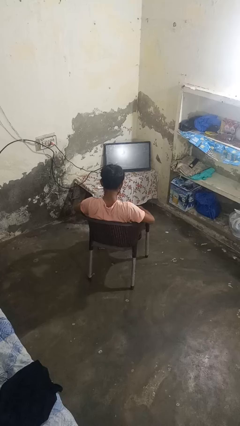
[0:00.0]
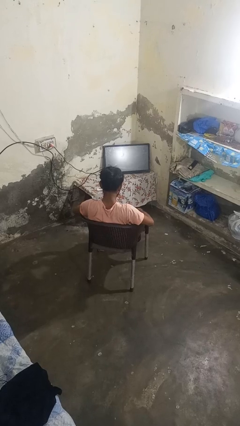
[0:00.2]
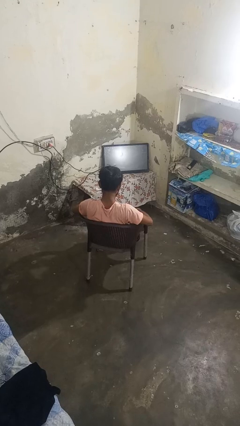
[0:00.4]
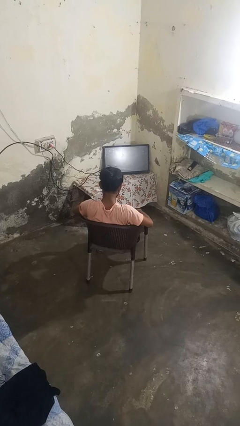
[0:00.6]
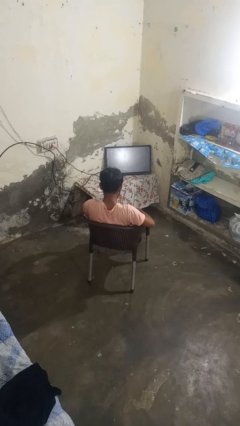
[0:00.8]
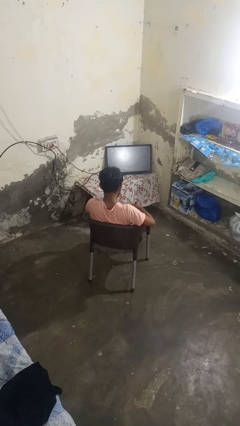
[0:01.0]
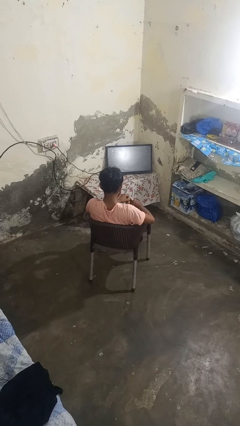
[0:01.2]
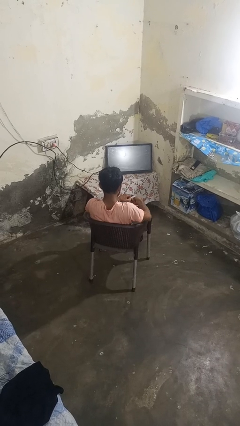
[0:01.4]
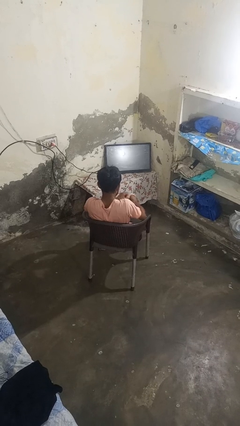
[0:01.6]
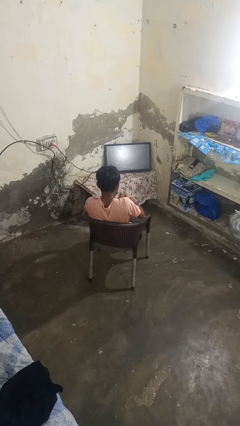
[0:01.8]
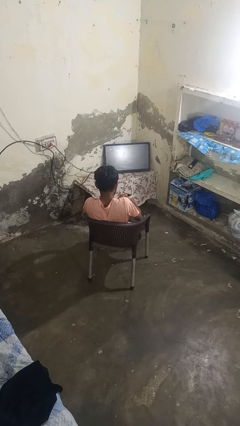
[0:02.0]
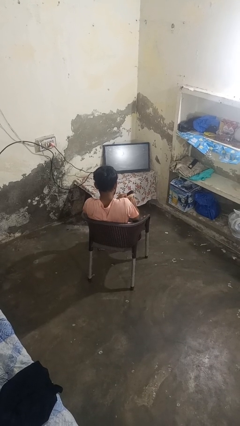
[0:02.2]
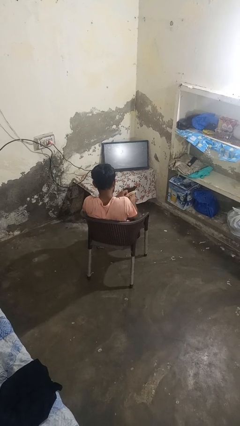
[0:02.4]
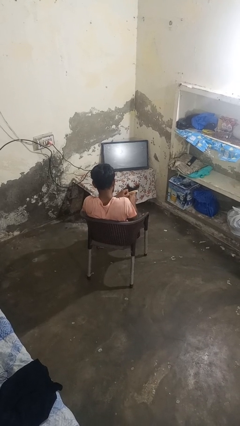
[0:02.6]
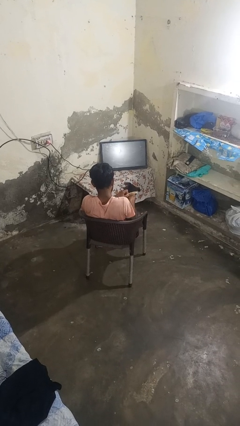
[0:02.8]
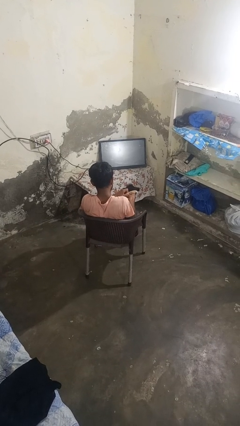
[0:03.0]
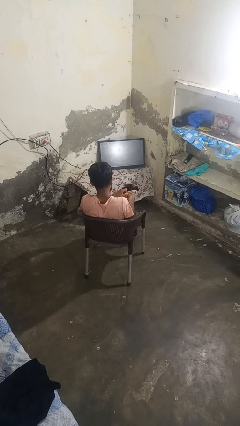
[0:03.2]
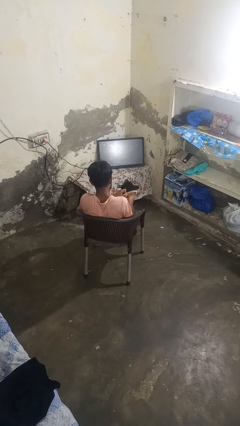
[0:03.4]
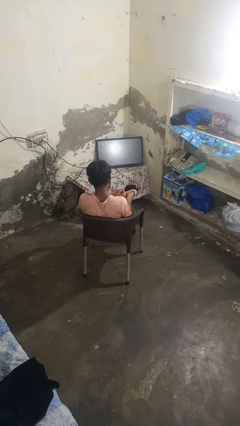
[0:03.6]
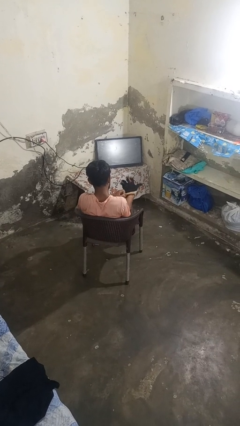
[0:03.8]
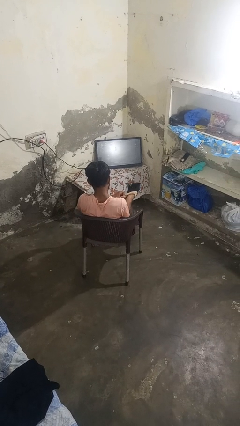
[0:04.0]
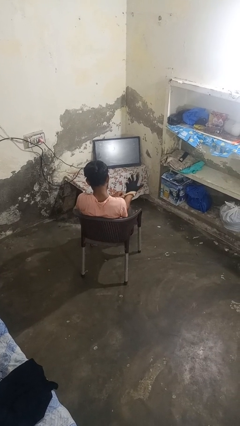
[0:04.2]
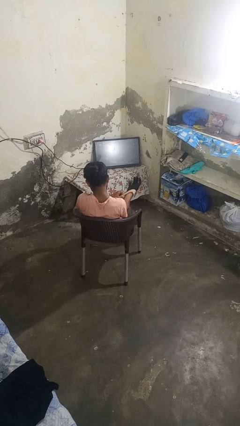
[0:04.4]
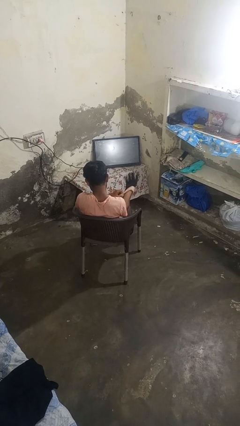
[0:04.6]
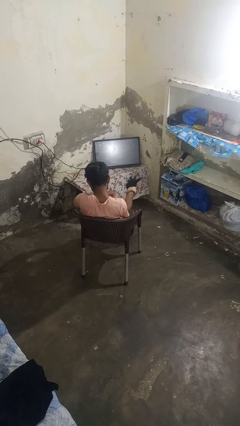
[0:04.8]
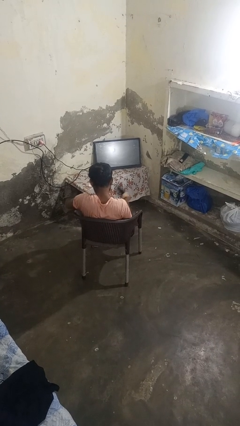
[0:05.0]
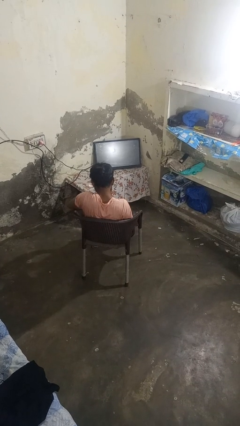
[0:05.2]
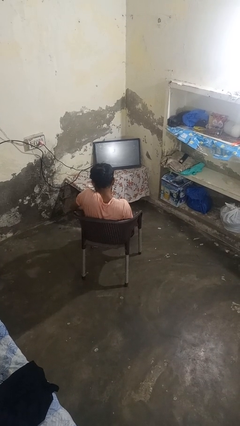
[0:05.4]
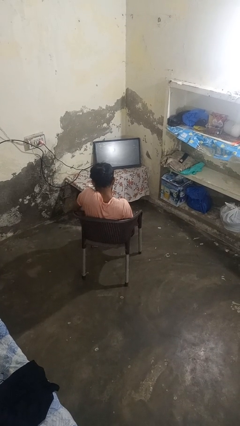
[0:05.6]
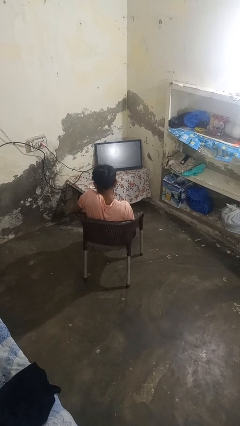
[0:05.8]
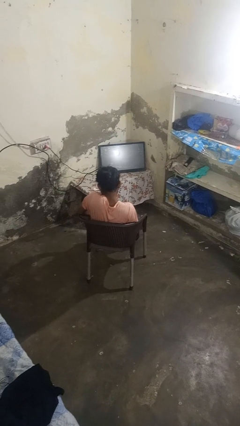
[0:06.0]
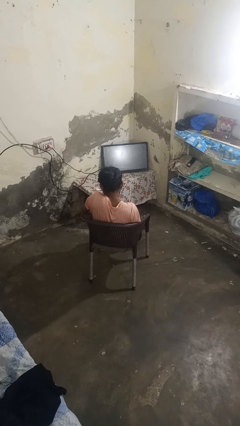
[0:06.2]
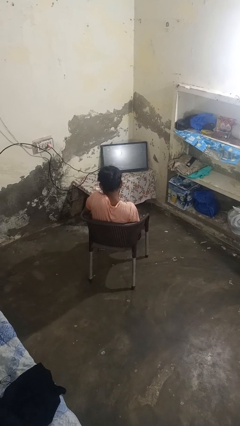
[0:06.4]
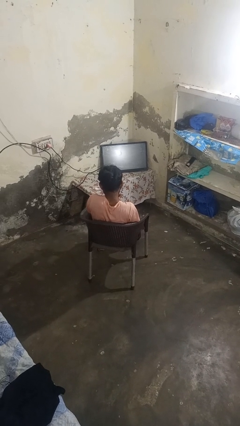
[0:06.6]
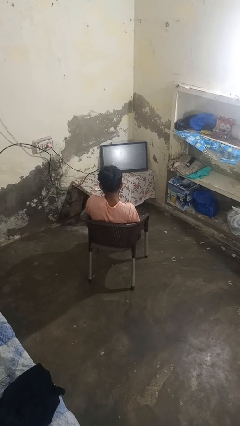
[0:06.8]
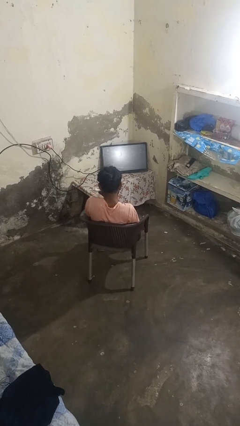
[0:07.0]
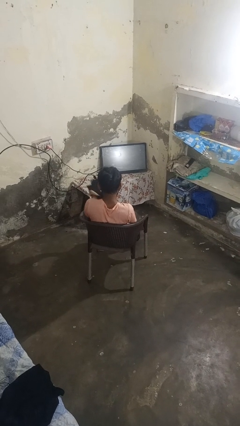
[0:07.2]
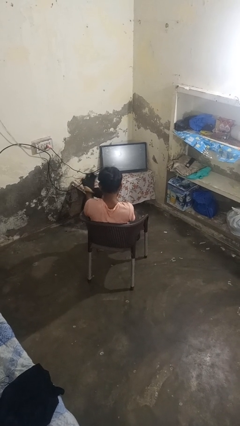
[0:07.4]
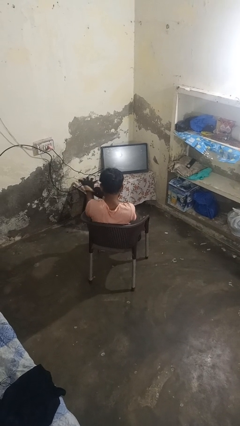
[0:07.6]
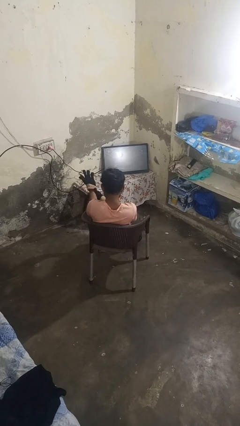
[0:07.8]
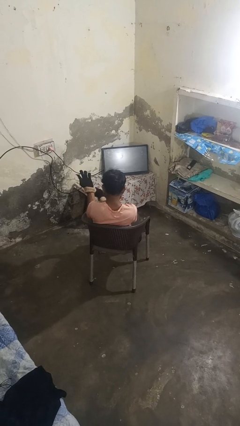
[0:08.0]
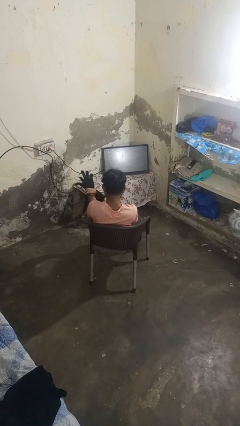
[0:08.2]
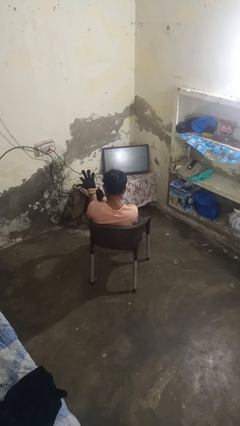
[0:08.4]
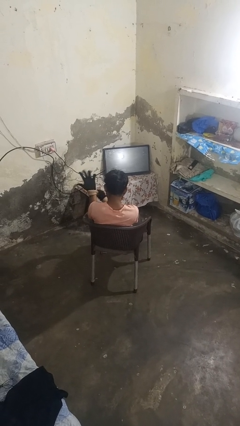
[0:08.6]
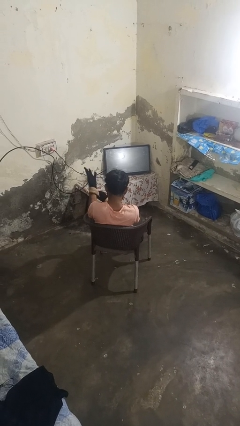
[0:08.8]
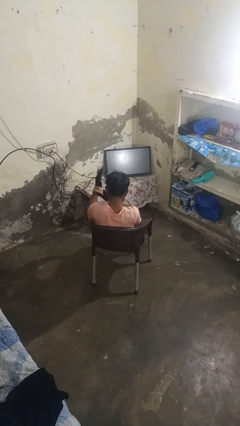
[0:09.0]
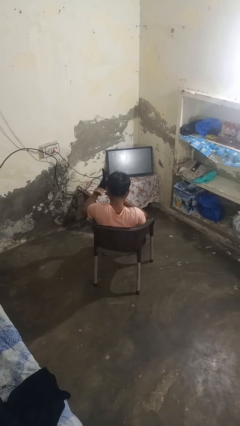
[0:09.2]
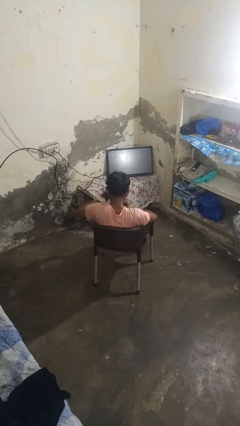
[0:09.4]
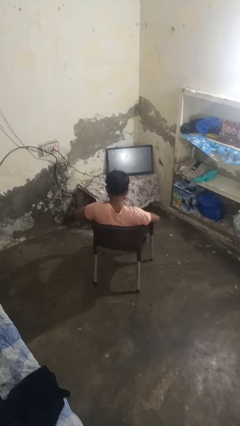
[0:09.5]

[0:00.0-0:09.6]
person puts on gloves

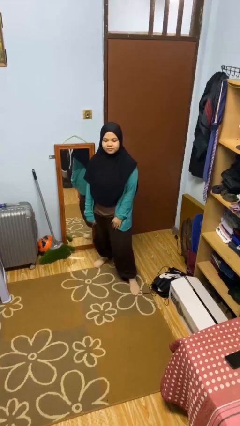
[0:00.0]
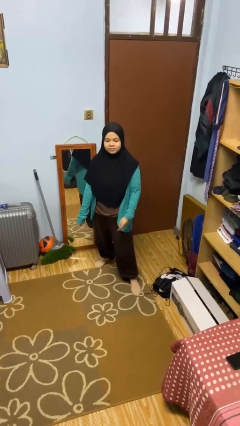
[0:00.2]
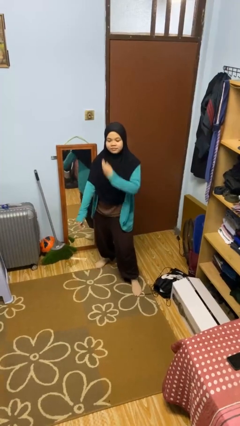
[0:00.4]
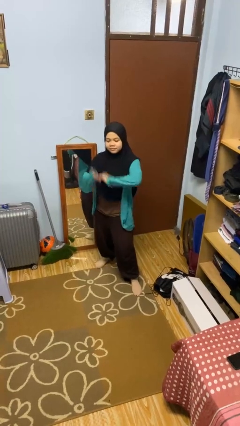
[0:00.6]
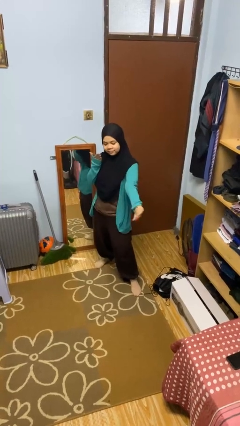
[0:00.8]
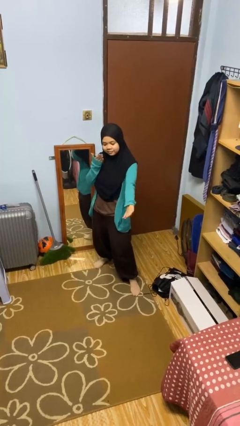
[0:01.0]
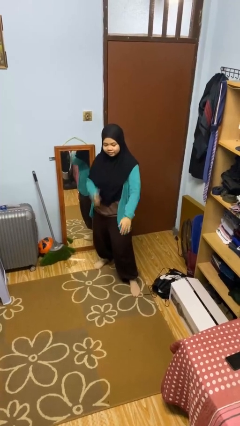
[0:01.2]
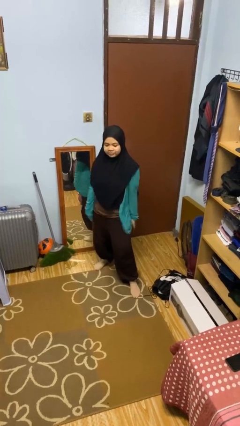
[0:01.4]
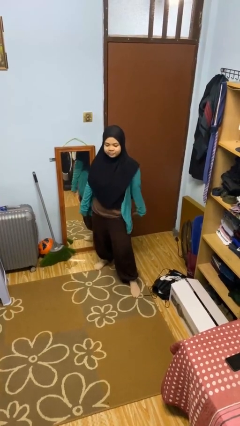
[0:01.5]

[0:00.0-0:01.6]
person karate chop

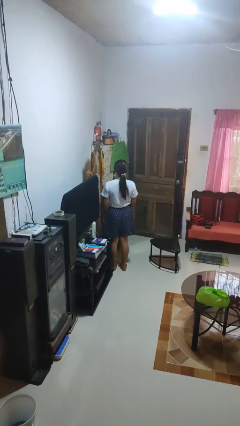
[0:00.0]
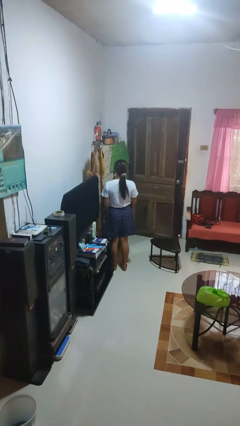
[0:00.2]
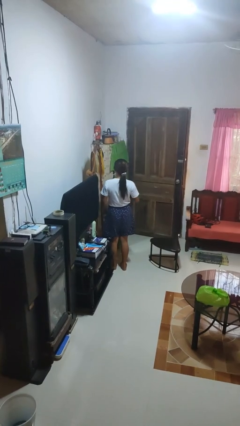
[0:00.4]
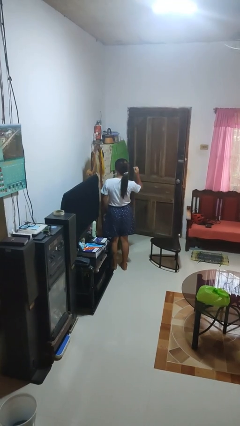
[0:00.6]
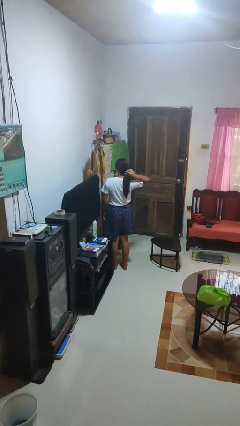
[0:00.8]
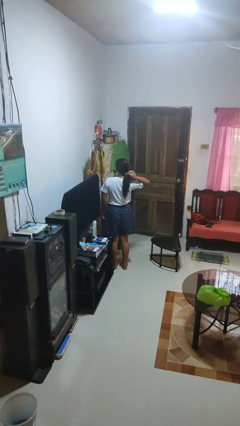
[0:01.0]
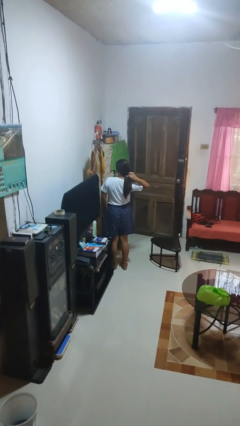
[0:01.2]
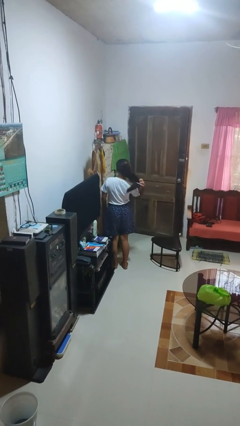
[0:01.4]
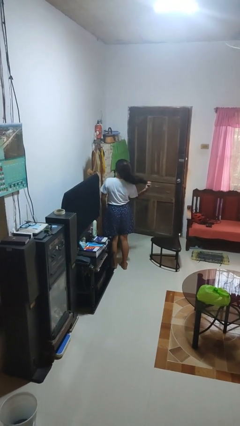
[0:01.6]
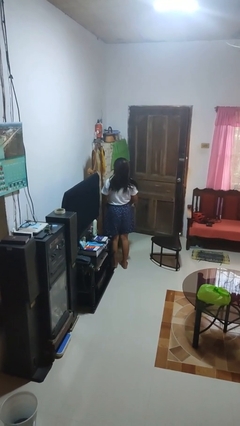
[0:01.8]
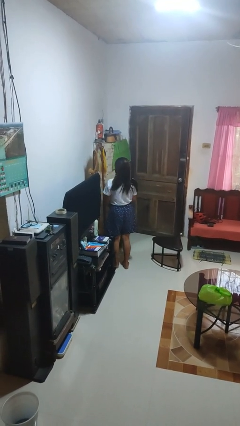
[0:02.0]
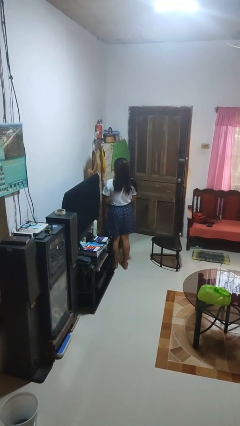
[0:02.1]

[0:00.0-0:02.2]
person takes off hairtie

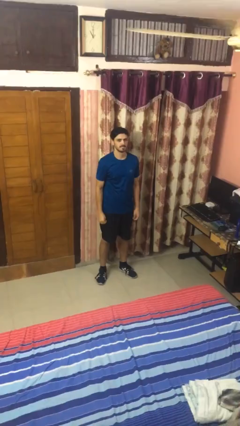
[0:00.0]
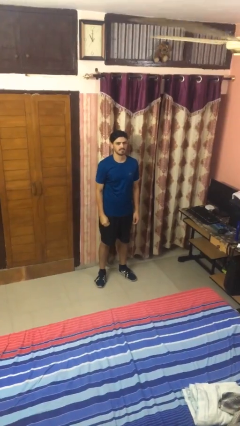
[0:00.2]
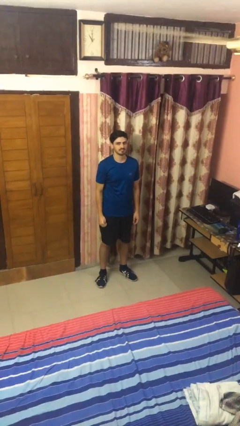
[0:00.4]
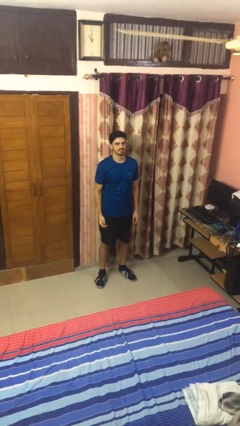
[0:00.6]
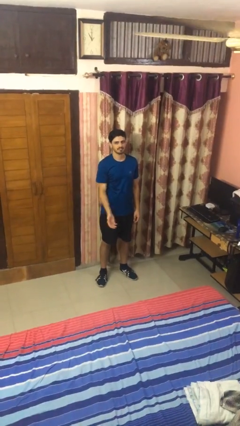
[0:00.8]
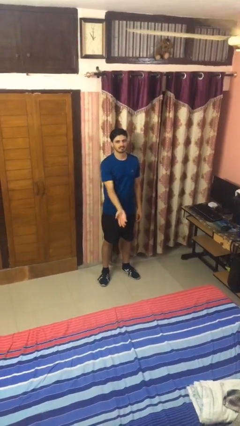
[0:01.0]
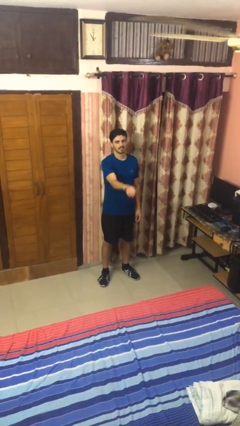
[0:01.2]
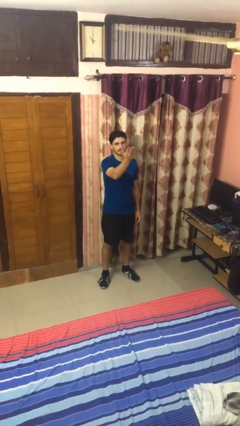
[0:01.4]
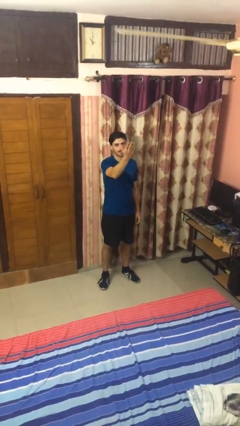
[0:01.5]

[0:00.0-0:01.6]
person gestures swipe up

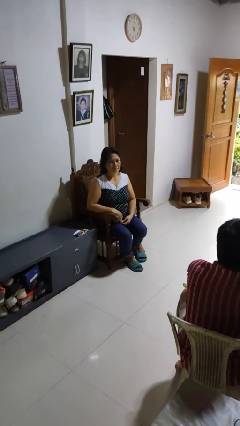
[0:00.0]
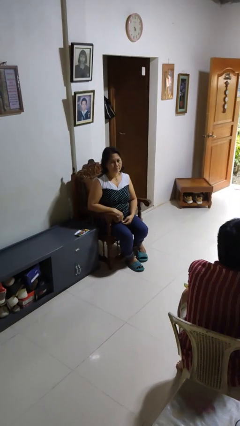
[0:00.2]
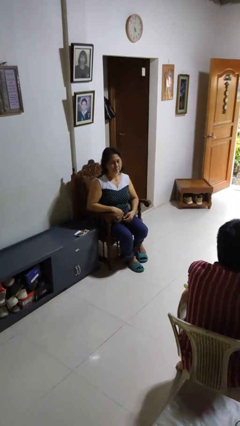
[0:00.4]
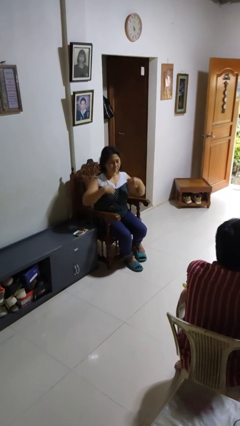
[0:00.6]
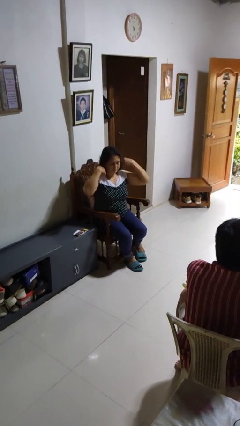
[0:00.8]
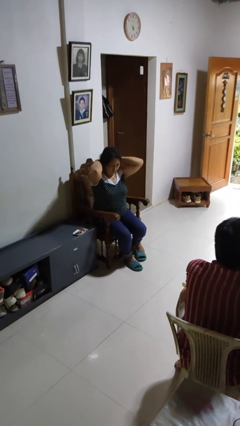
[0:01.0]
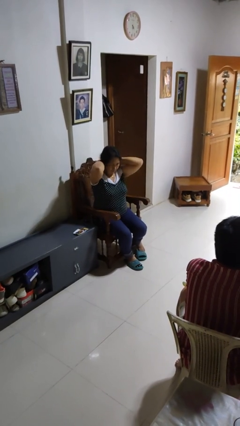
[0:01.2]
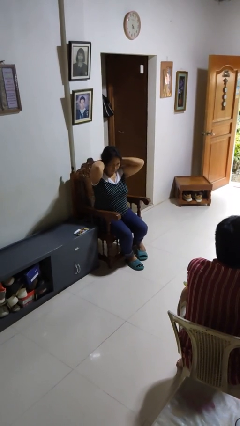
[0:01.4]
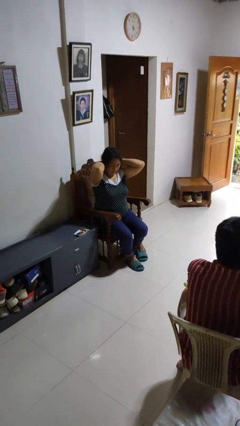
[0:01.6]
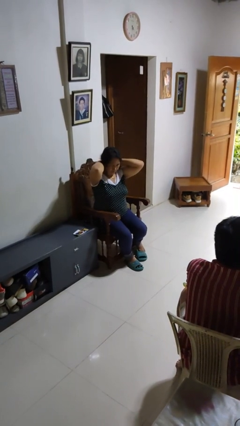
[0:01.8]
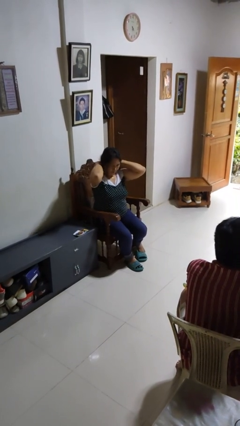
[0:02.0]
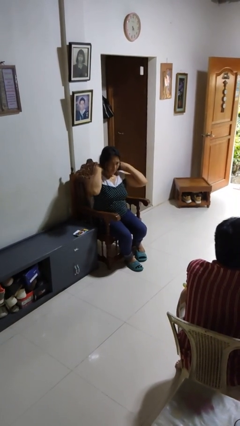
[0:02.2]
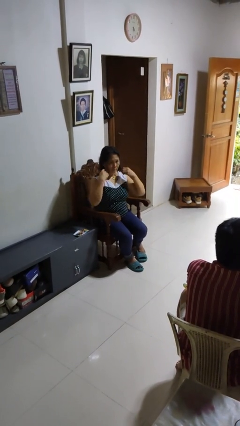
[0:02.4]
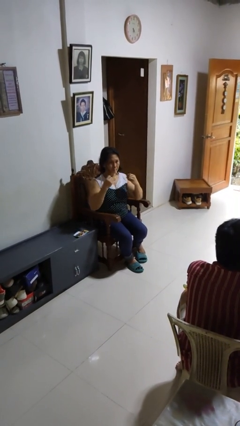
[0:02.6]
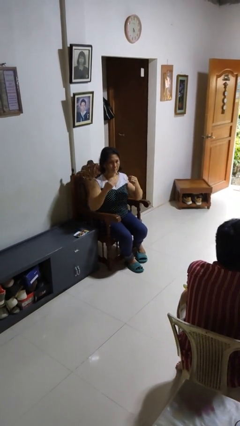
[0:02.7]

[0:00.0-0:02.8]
person takes off necklace
